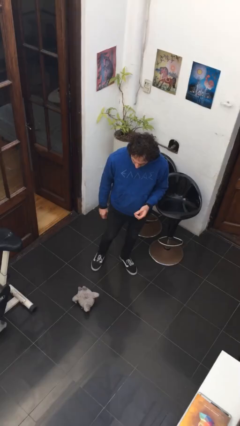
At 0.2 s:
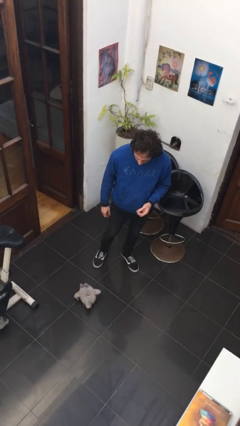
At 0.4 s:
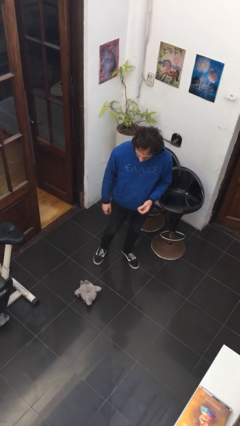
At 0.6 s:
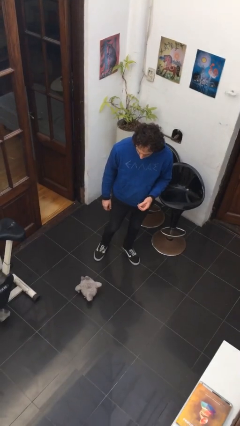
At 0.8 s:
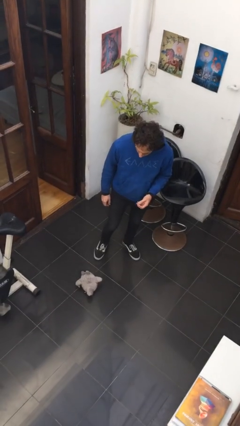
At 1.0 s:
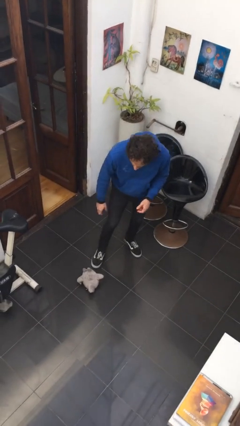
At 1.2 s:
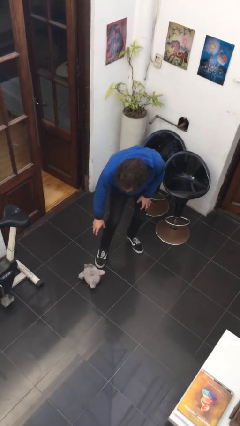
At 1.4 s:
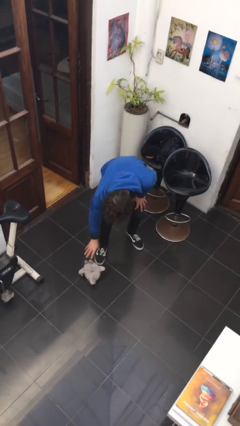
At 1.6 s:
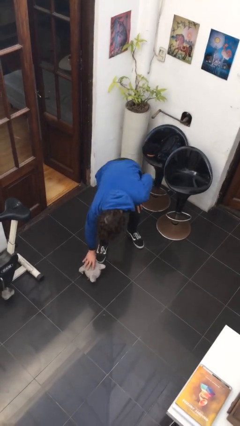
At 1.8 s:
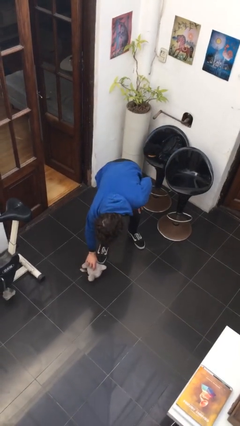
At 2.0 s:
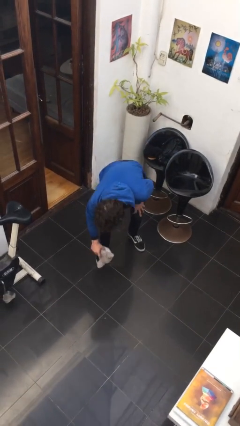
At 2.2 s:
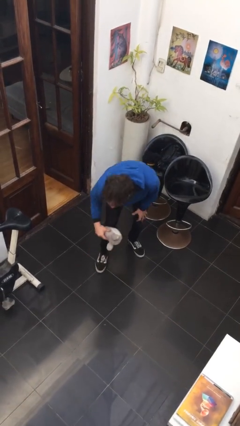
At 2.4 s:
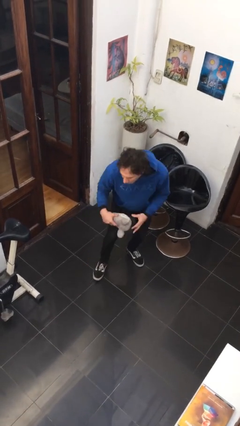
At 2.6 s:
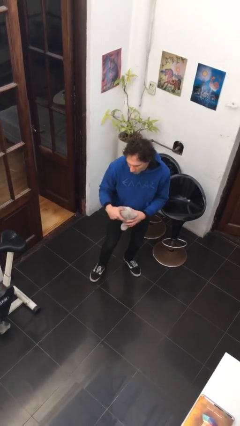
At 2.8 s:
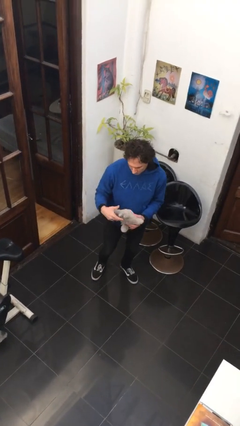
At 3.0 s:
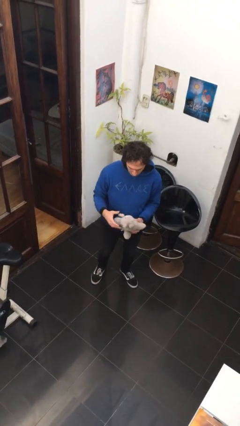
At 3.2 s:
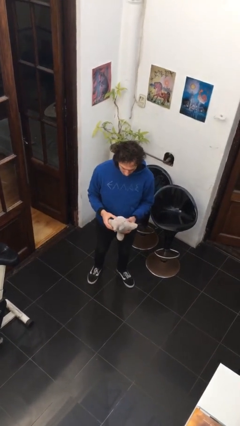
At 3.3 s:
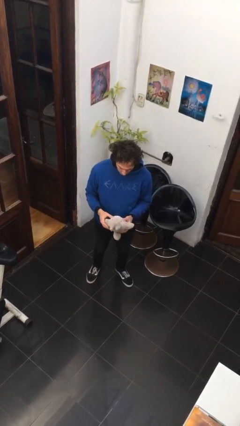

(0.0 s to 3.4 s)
person picks up object from floor

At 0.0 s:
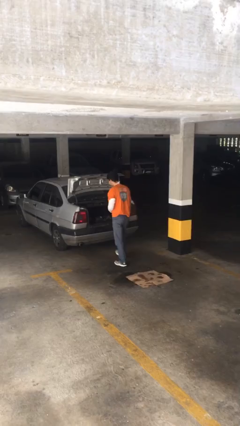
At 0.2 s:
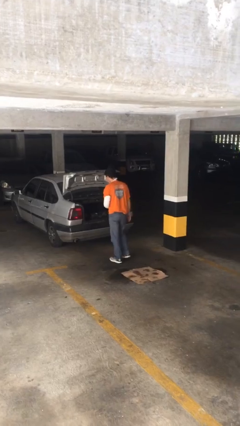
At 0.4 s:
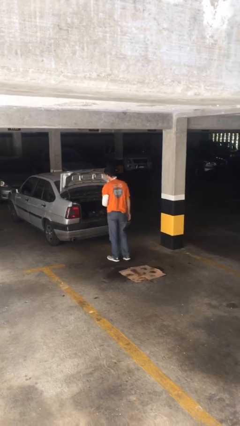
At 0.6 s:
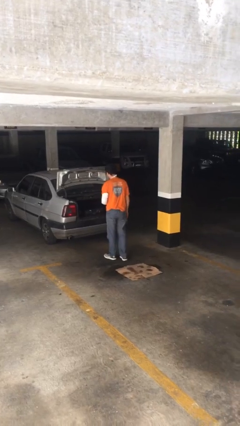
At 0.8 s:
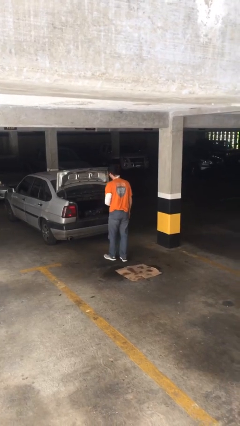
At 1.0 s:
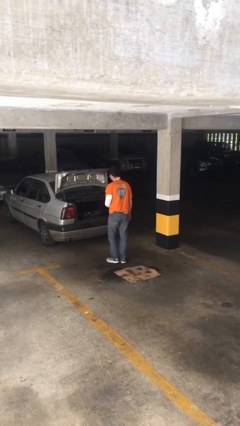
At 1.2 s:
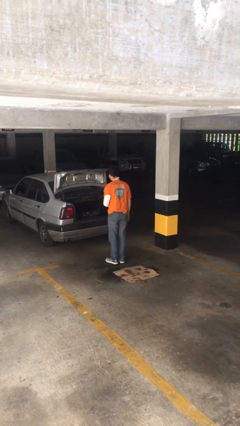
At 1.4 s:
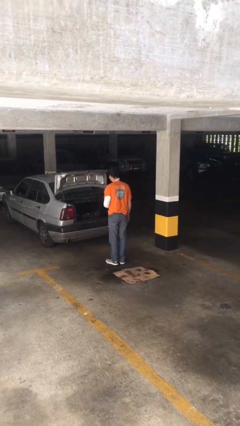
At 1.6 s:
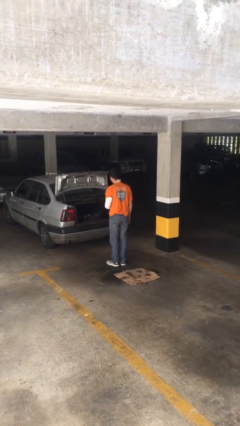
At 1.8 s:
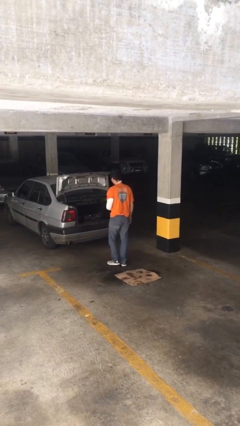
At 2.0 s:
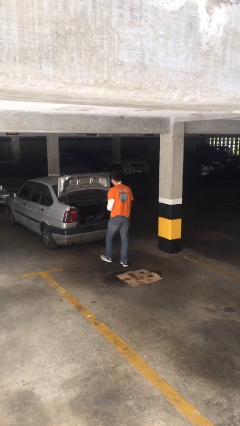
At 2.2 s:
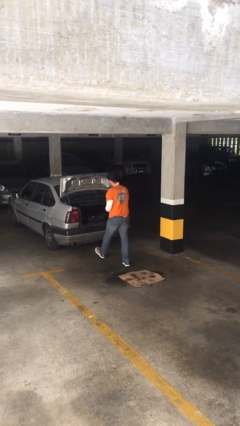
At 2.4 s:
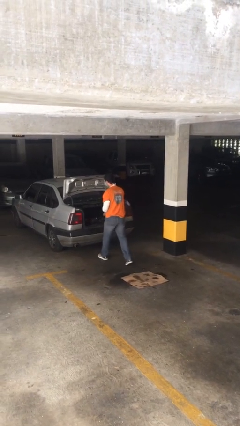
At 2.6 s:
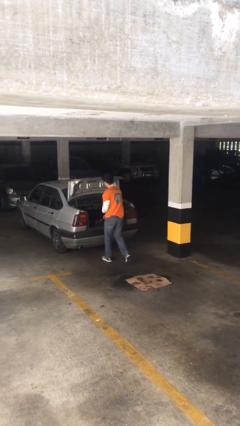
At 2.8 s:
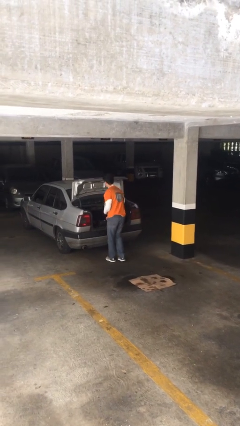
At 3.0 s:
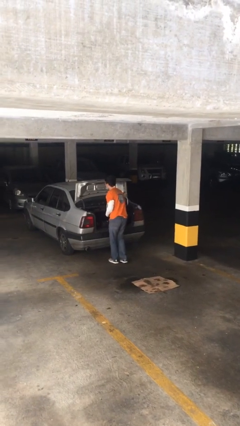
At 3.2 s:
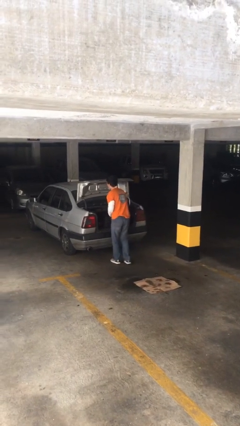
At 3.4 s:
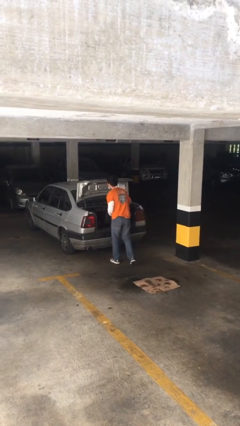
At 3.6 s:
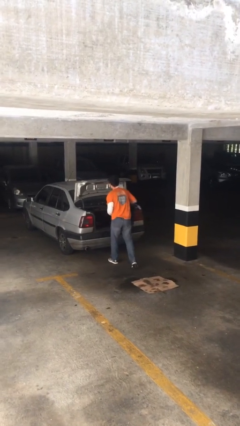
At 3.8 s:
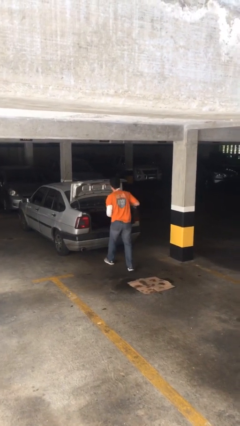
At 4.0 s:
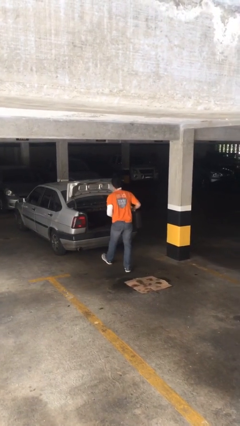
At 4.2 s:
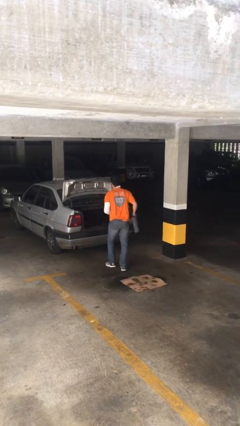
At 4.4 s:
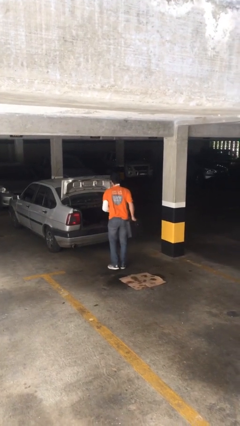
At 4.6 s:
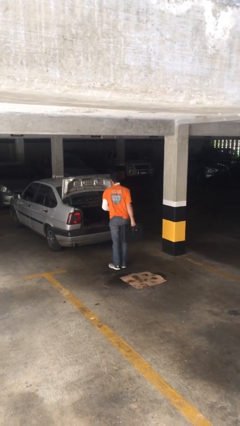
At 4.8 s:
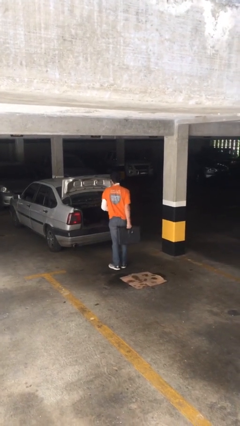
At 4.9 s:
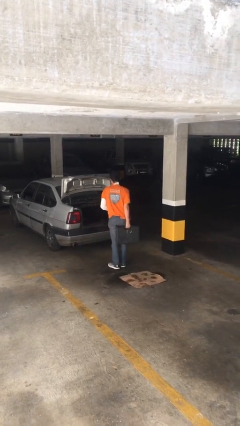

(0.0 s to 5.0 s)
person unloads car

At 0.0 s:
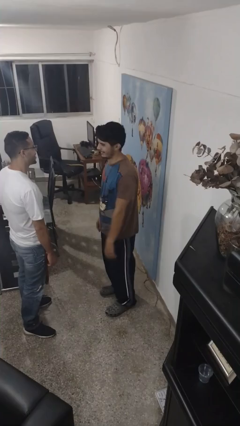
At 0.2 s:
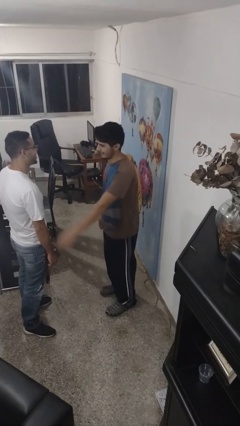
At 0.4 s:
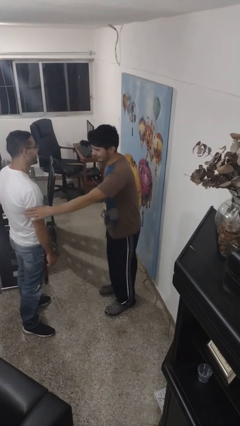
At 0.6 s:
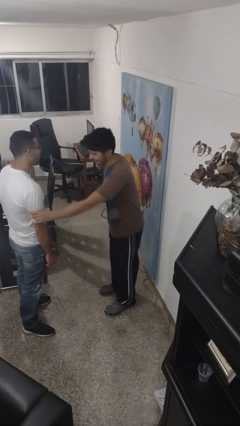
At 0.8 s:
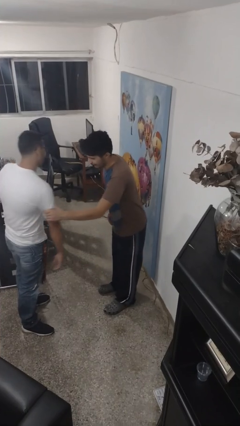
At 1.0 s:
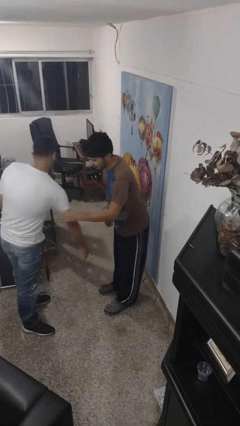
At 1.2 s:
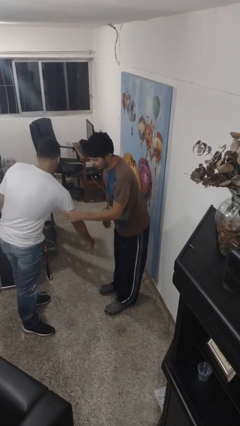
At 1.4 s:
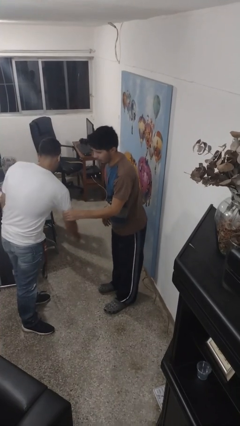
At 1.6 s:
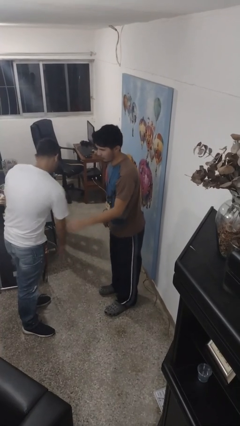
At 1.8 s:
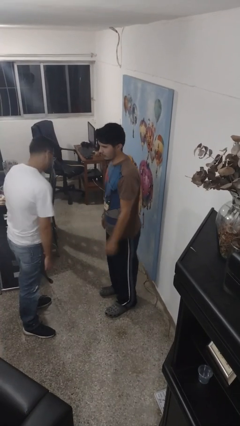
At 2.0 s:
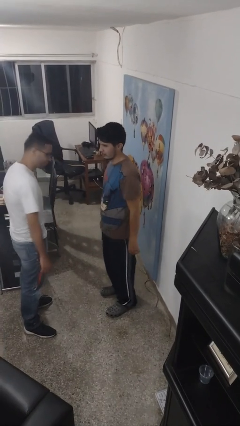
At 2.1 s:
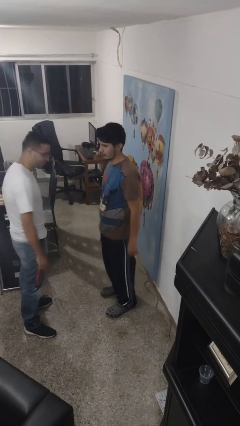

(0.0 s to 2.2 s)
person grabs person by bicep

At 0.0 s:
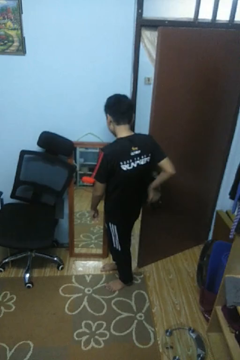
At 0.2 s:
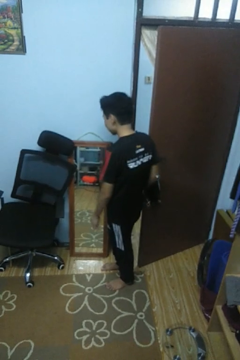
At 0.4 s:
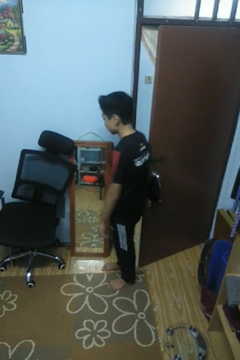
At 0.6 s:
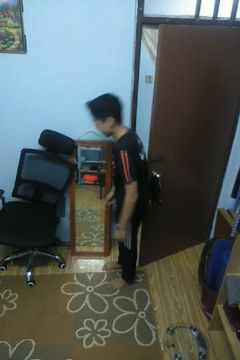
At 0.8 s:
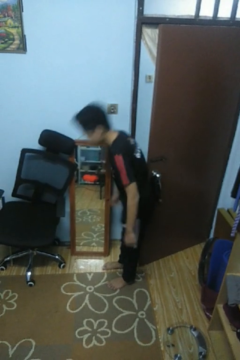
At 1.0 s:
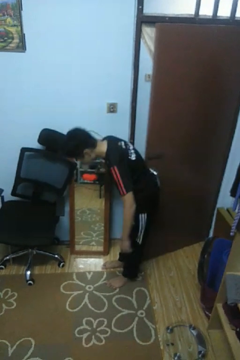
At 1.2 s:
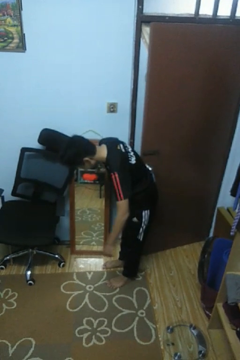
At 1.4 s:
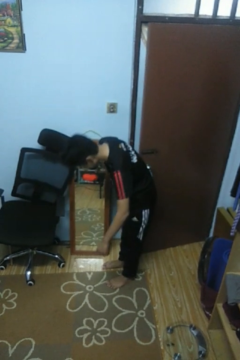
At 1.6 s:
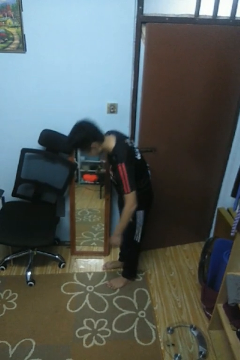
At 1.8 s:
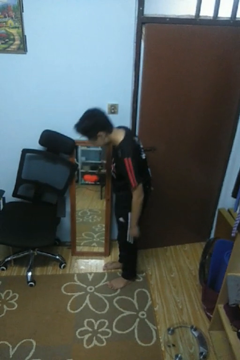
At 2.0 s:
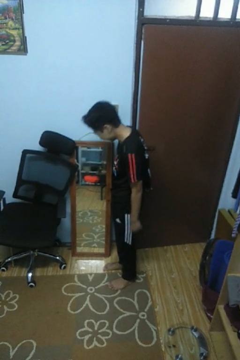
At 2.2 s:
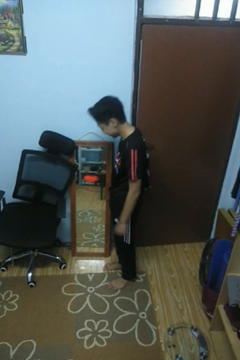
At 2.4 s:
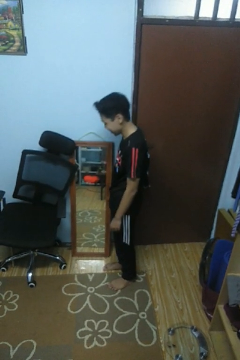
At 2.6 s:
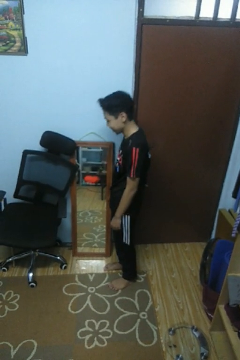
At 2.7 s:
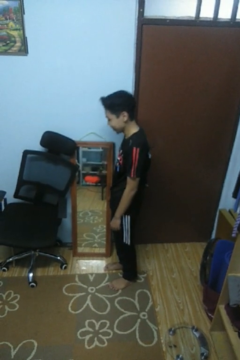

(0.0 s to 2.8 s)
person closes door with hip

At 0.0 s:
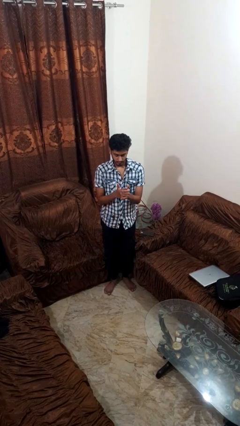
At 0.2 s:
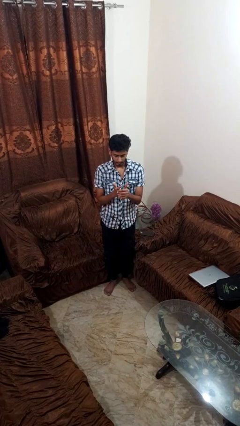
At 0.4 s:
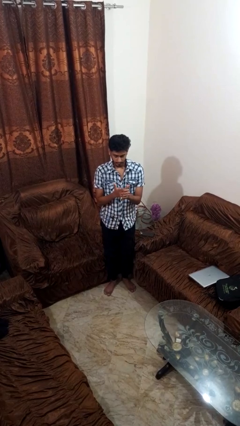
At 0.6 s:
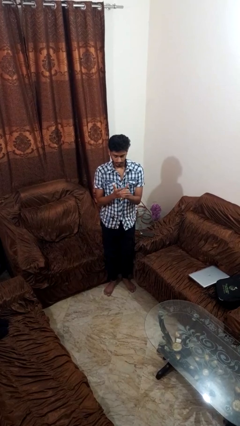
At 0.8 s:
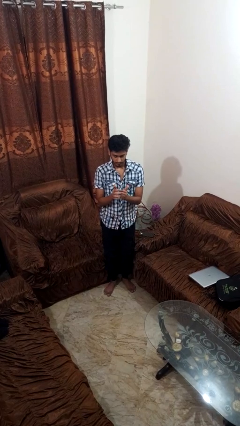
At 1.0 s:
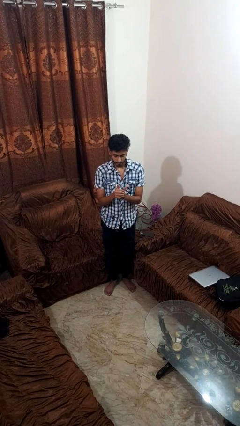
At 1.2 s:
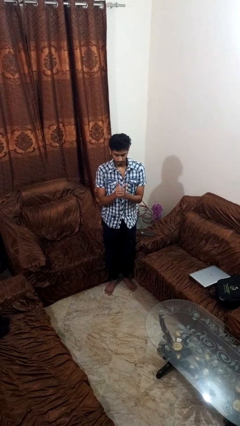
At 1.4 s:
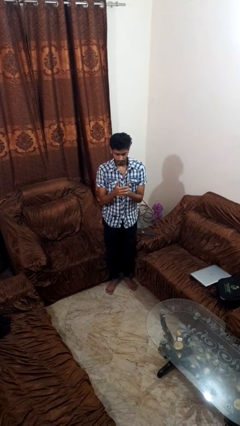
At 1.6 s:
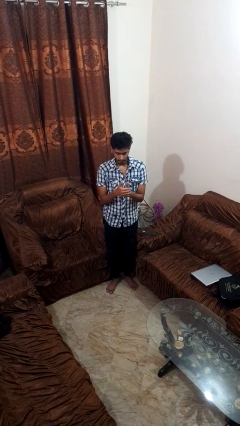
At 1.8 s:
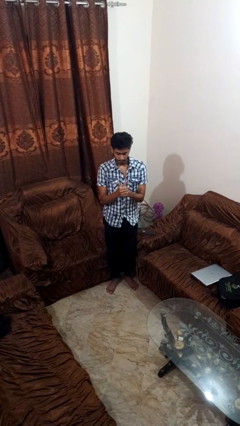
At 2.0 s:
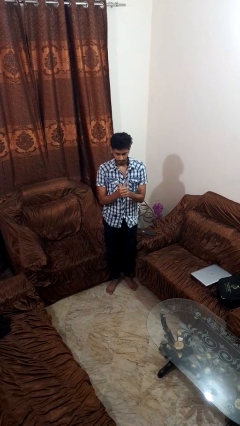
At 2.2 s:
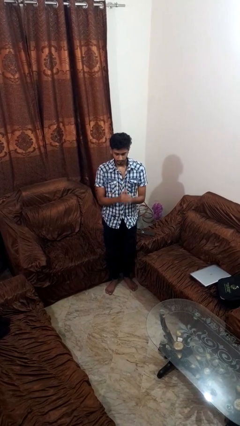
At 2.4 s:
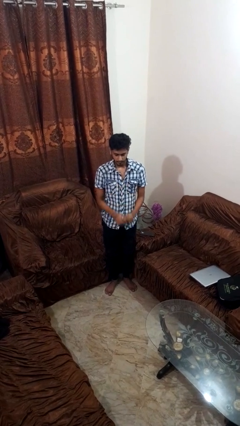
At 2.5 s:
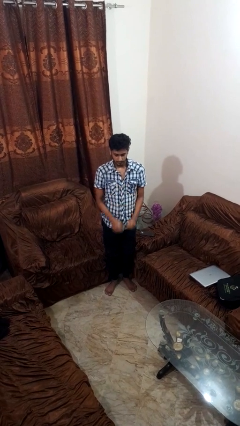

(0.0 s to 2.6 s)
person cracks knuckles

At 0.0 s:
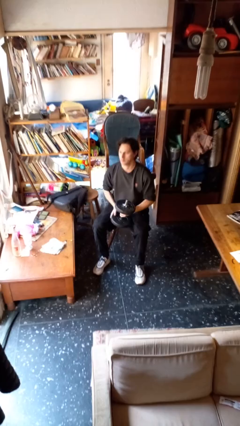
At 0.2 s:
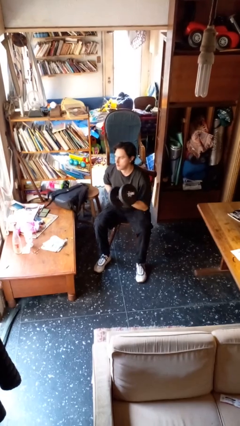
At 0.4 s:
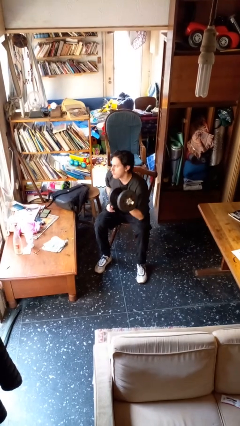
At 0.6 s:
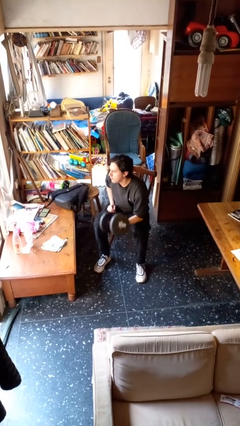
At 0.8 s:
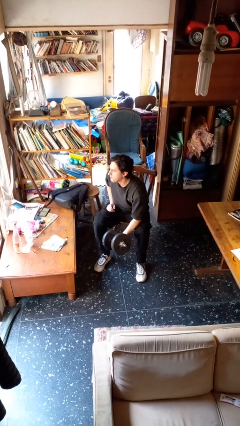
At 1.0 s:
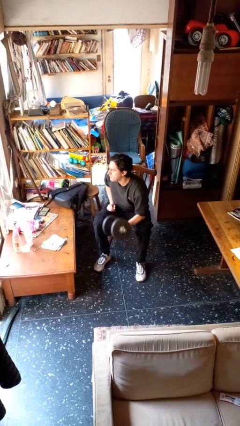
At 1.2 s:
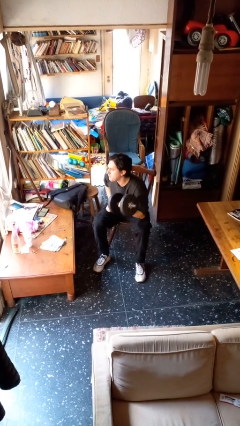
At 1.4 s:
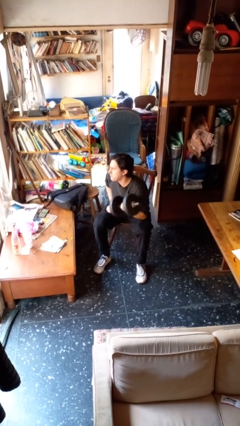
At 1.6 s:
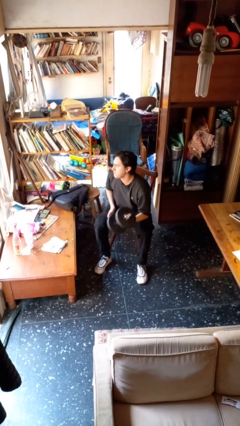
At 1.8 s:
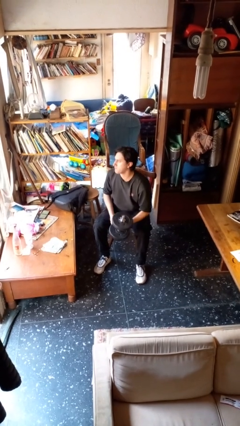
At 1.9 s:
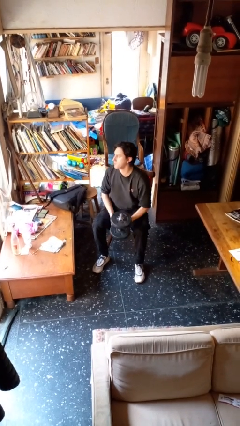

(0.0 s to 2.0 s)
person lifts dumbbells

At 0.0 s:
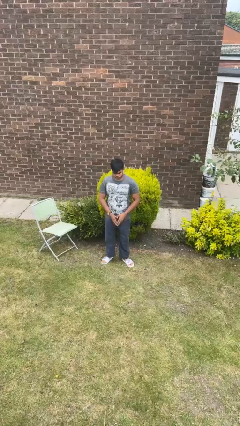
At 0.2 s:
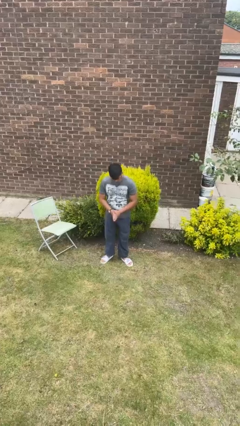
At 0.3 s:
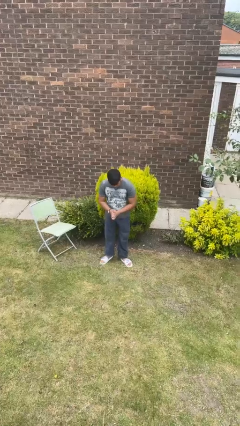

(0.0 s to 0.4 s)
person bows
